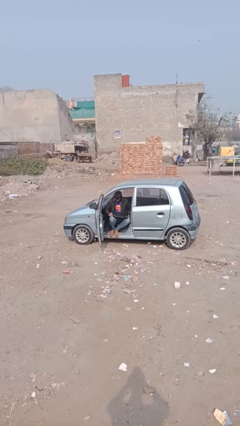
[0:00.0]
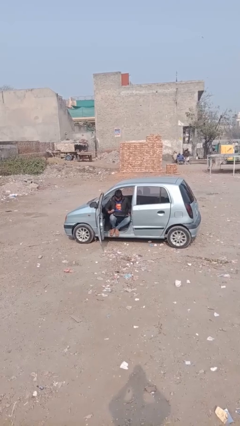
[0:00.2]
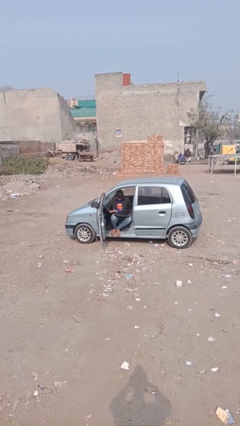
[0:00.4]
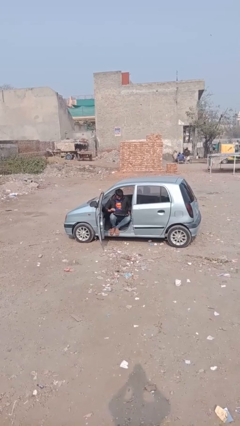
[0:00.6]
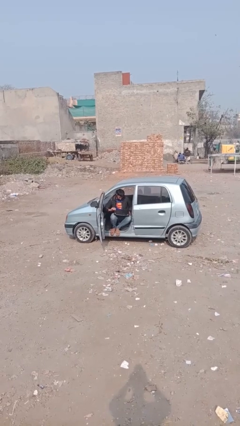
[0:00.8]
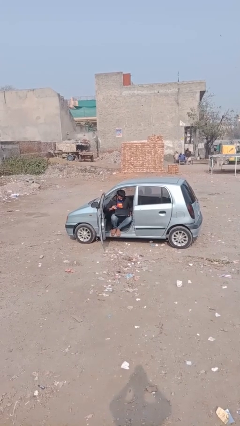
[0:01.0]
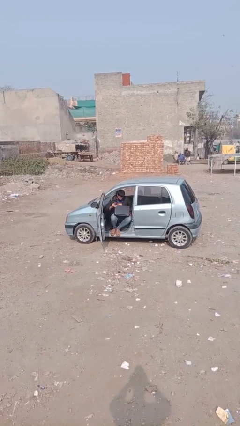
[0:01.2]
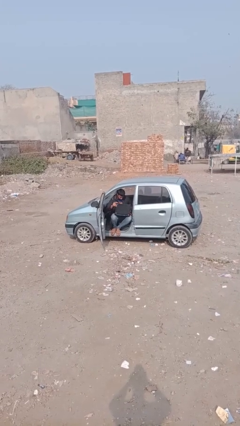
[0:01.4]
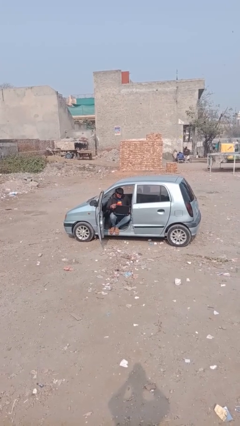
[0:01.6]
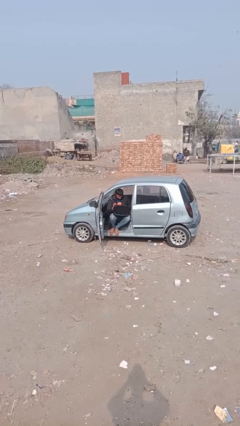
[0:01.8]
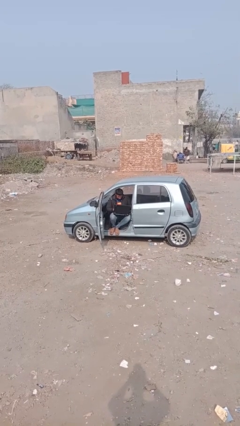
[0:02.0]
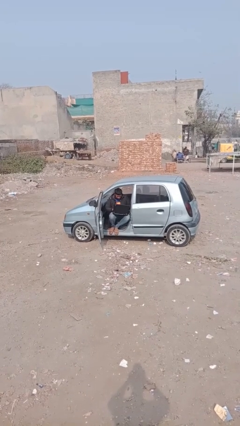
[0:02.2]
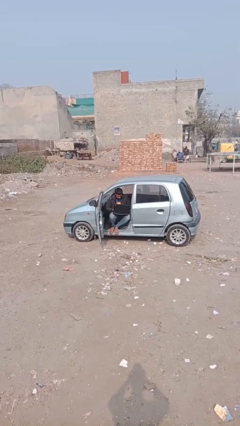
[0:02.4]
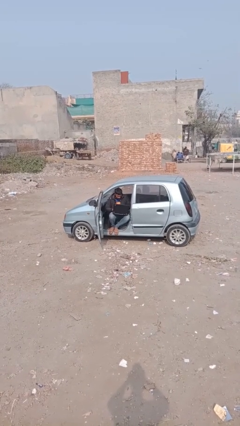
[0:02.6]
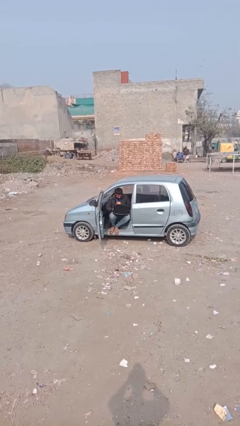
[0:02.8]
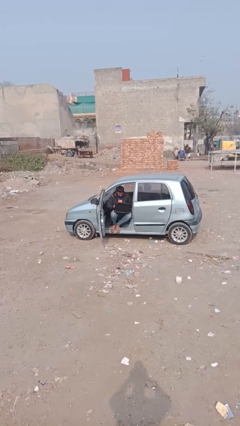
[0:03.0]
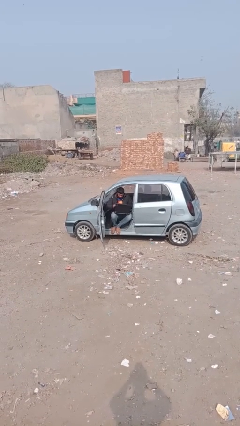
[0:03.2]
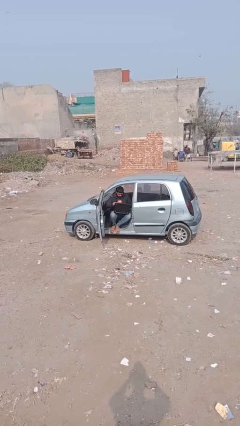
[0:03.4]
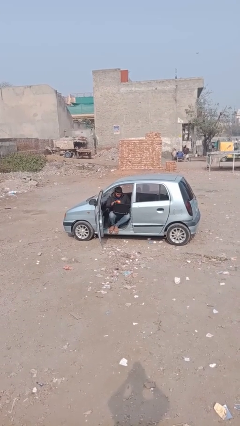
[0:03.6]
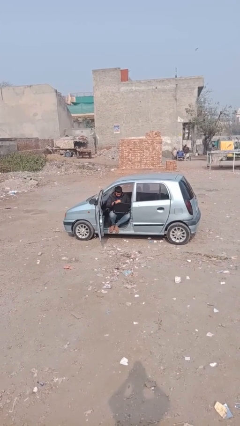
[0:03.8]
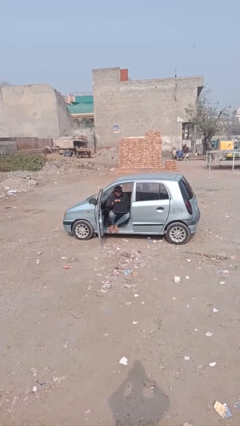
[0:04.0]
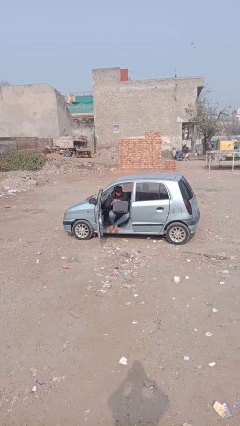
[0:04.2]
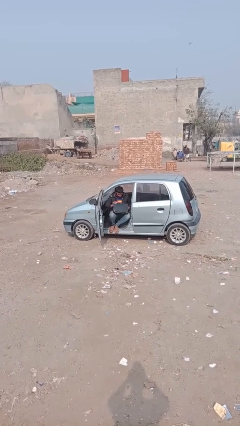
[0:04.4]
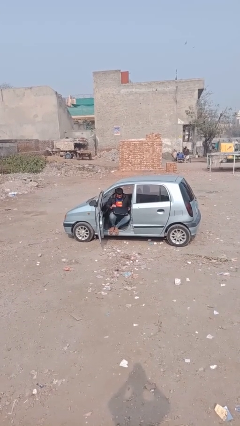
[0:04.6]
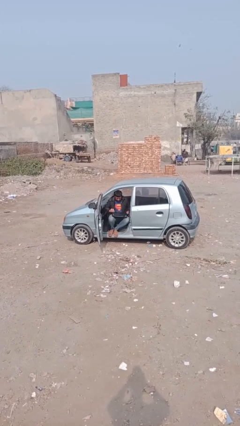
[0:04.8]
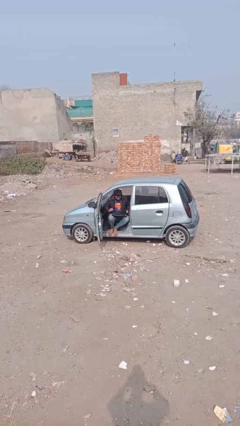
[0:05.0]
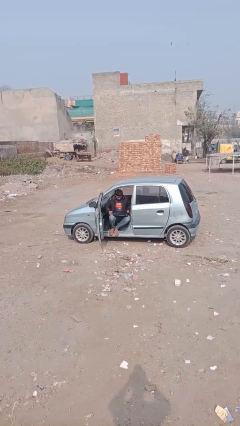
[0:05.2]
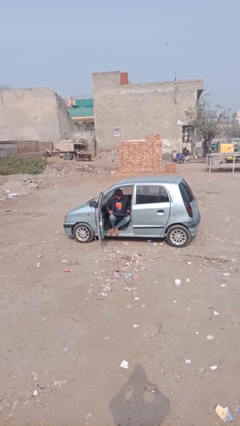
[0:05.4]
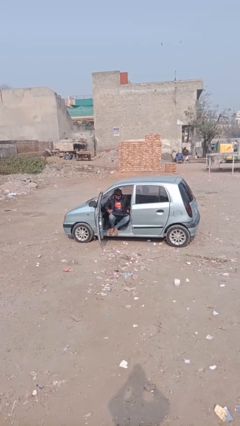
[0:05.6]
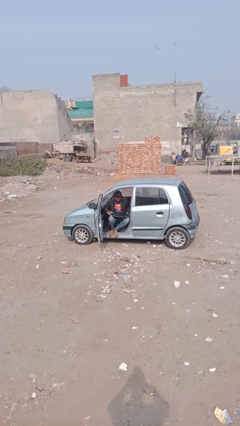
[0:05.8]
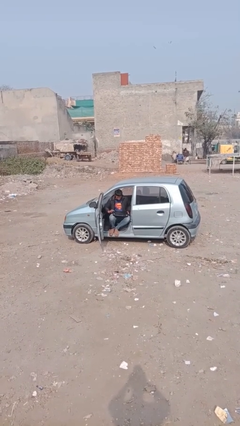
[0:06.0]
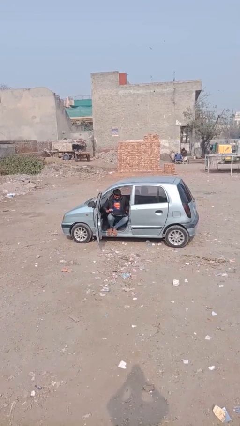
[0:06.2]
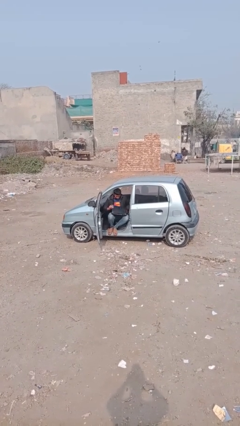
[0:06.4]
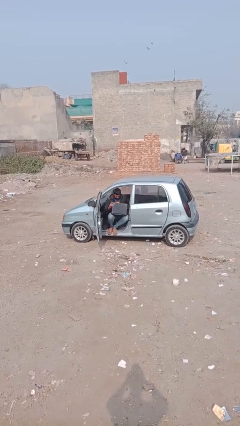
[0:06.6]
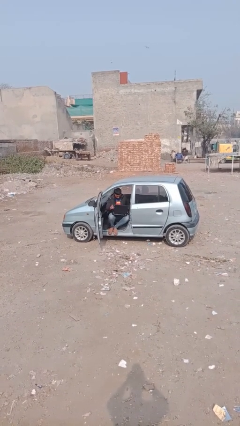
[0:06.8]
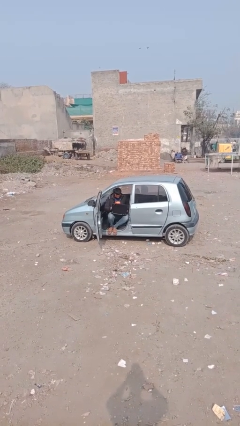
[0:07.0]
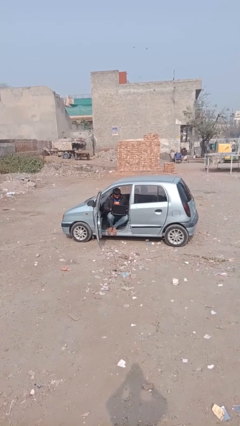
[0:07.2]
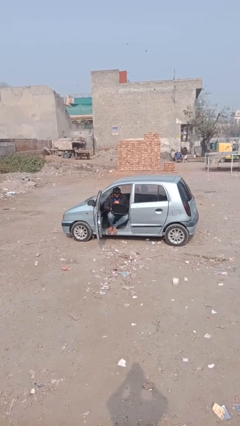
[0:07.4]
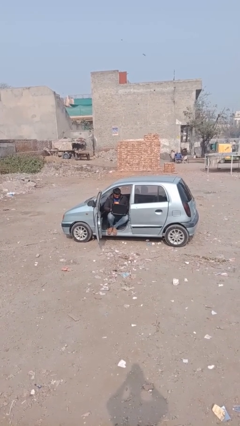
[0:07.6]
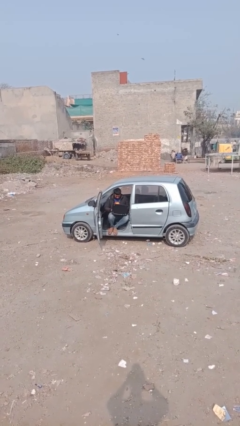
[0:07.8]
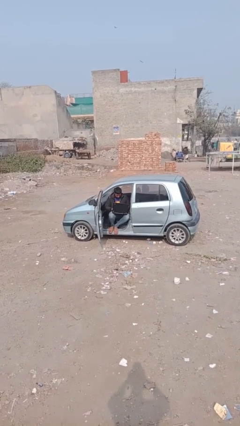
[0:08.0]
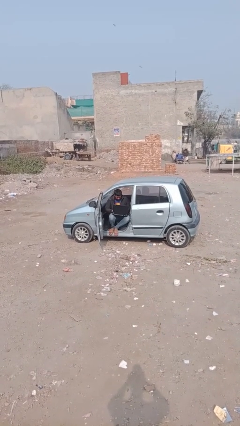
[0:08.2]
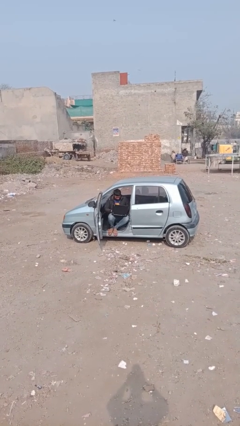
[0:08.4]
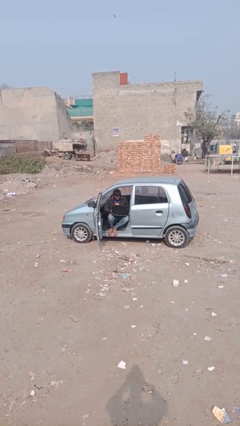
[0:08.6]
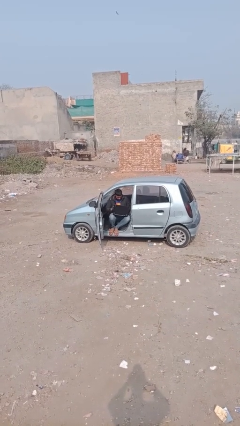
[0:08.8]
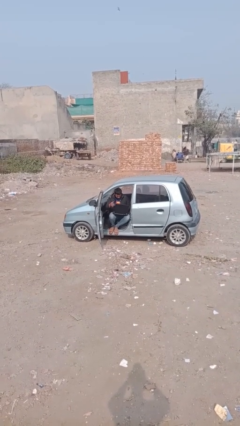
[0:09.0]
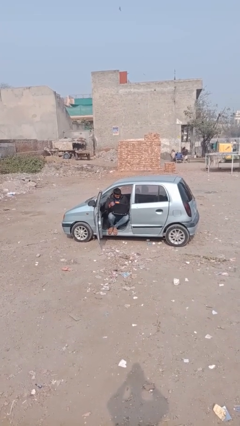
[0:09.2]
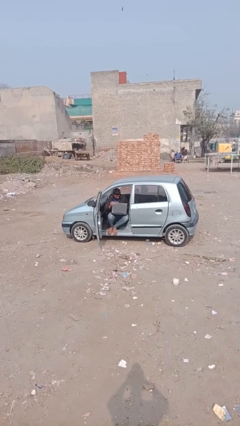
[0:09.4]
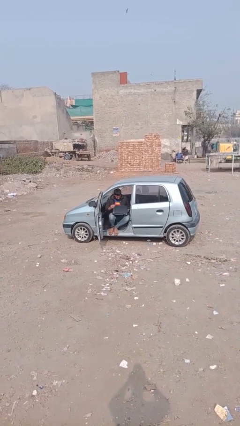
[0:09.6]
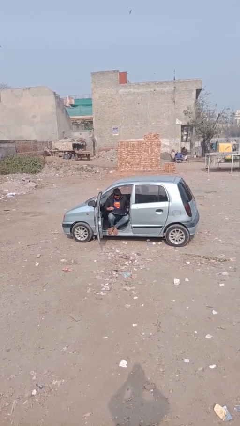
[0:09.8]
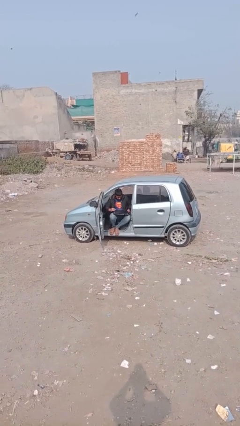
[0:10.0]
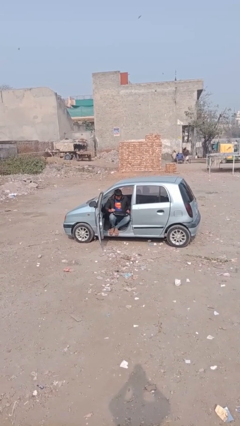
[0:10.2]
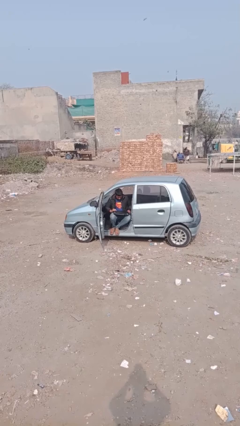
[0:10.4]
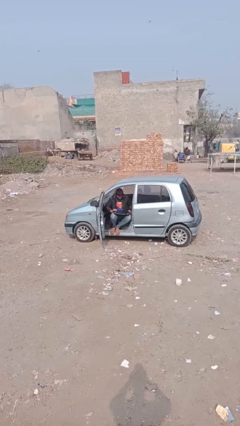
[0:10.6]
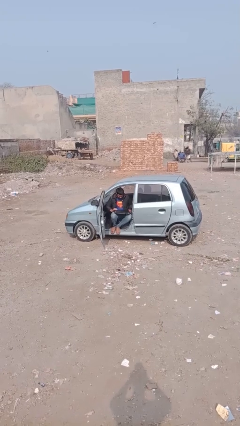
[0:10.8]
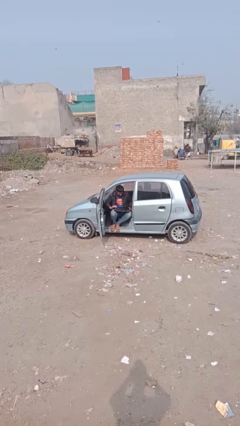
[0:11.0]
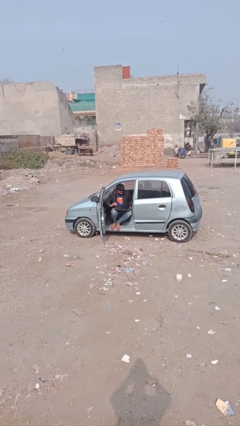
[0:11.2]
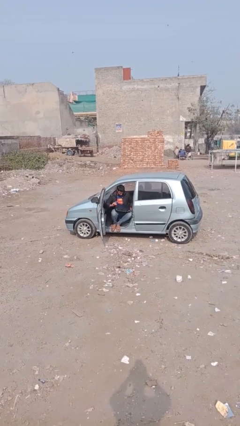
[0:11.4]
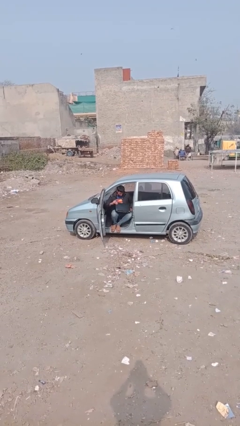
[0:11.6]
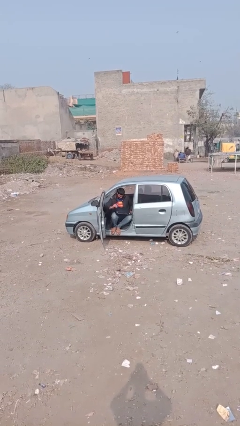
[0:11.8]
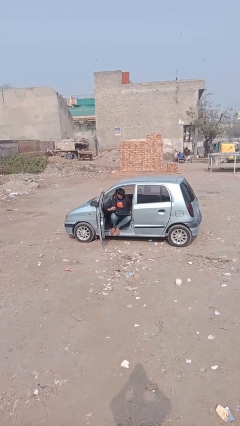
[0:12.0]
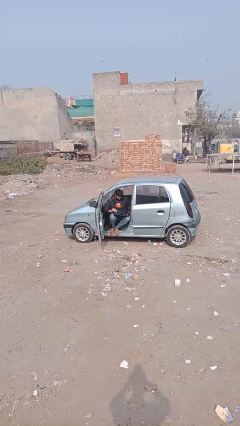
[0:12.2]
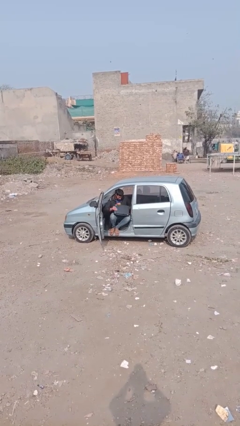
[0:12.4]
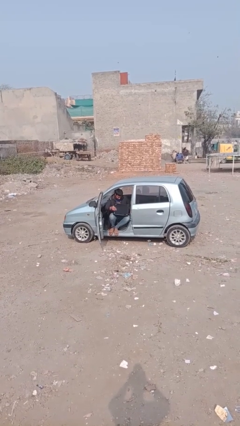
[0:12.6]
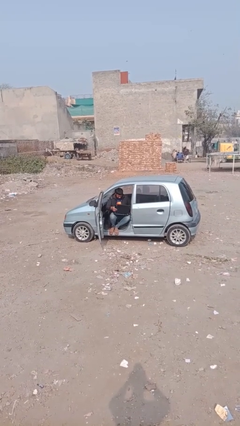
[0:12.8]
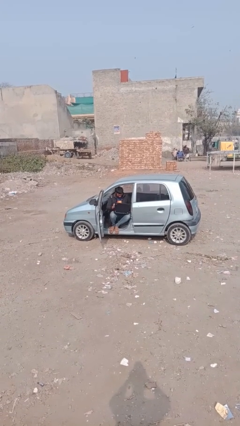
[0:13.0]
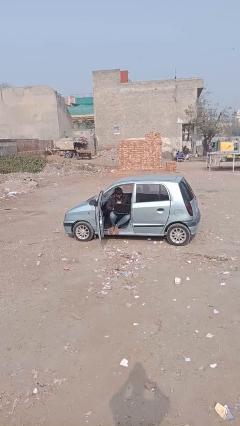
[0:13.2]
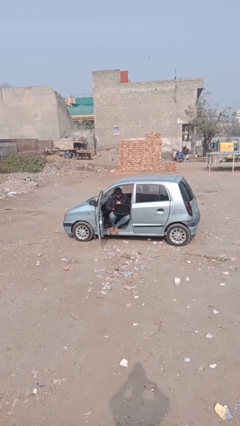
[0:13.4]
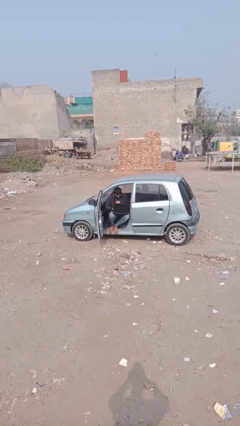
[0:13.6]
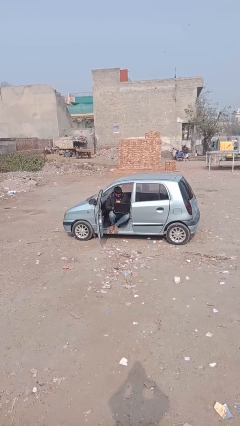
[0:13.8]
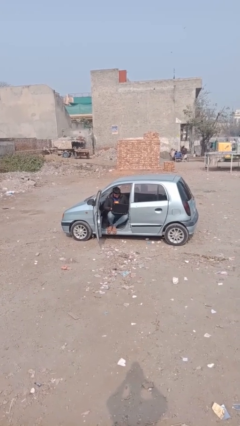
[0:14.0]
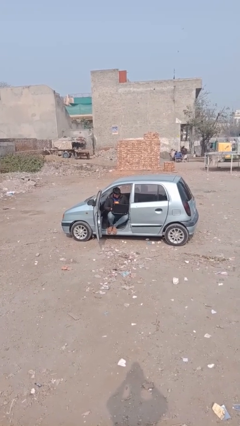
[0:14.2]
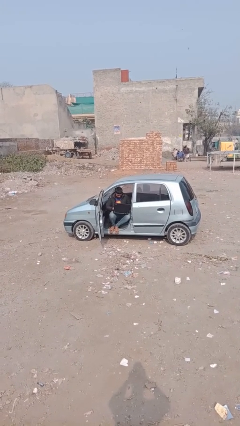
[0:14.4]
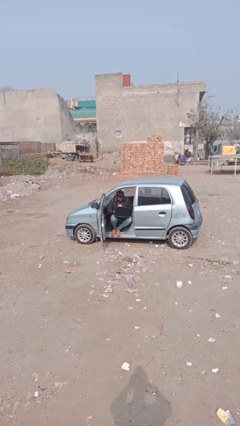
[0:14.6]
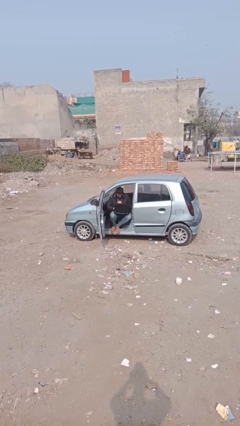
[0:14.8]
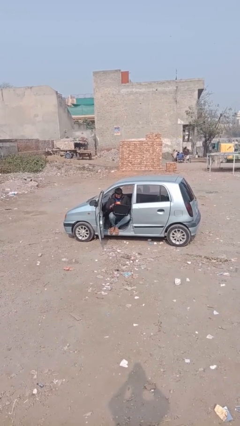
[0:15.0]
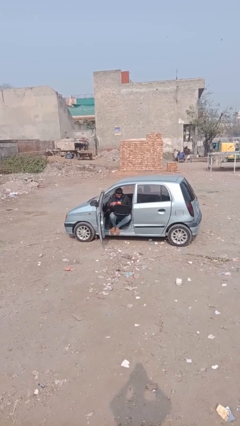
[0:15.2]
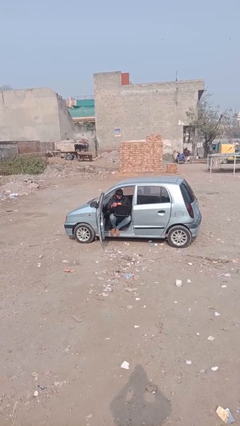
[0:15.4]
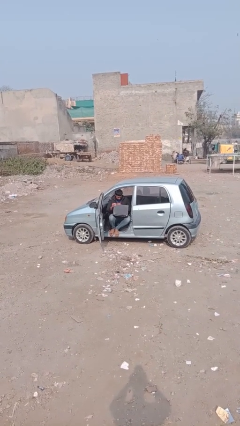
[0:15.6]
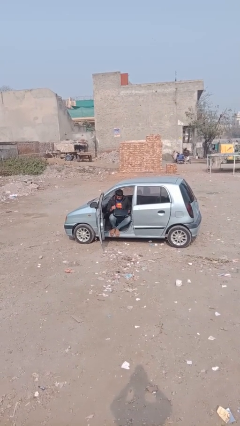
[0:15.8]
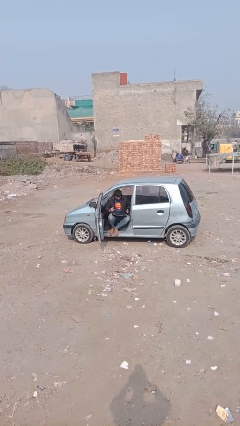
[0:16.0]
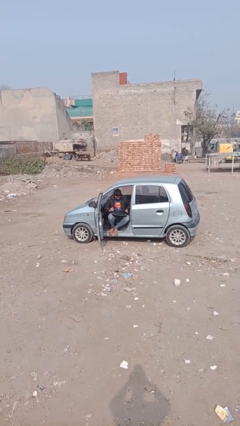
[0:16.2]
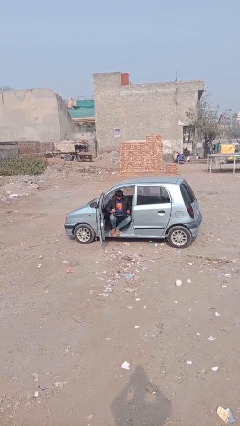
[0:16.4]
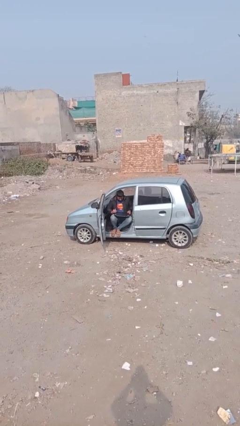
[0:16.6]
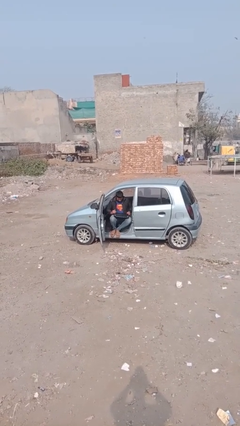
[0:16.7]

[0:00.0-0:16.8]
person interacts with laptop

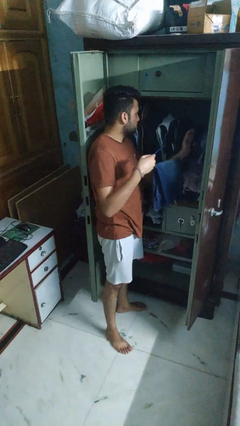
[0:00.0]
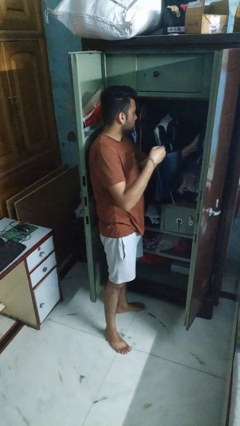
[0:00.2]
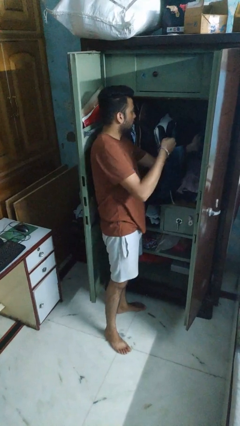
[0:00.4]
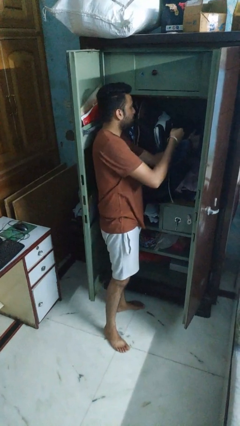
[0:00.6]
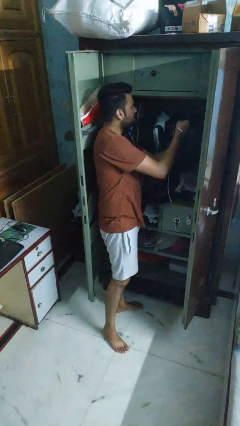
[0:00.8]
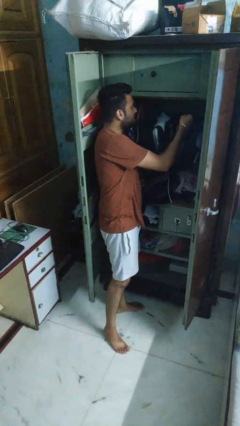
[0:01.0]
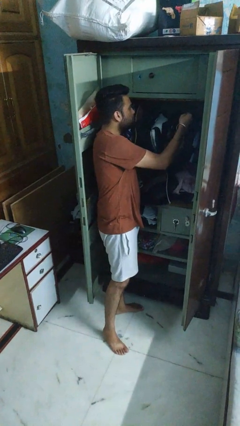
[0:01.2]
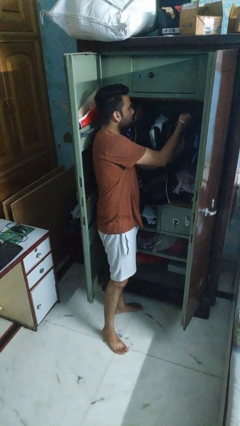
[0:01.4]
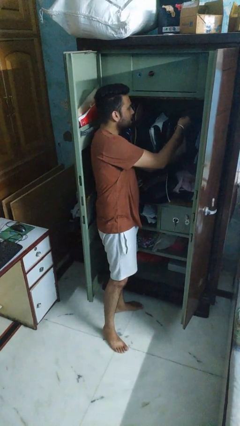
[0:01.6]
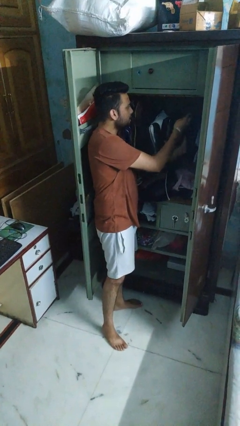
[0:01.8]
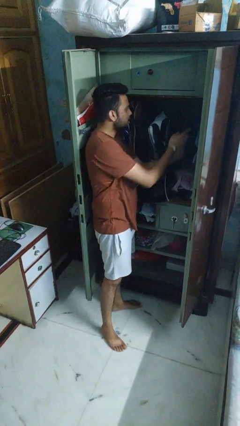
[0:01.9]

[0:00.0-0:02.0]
person puts clothes into closet
